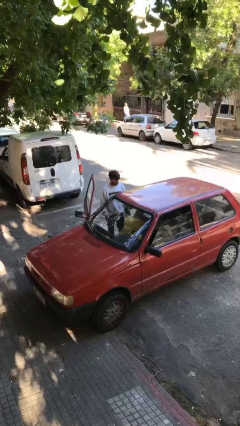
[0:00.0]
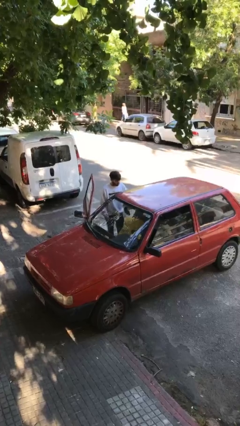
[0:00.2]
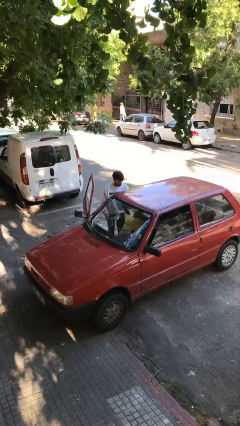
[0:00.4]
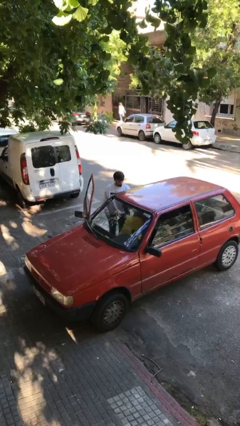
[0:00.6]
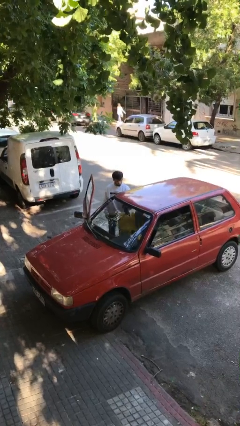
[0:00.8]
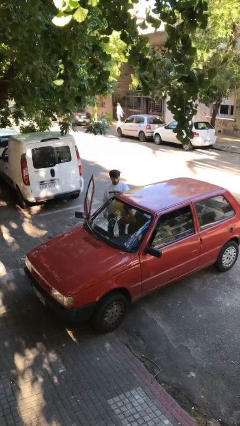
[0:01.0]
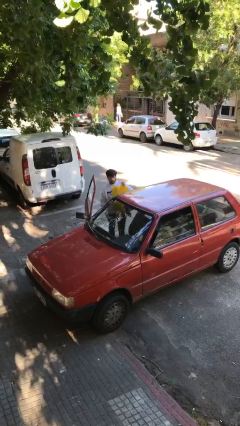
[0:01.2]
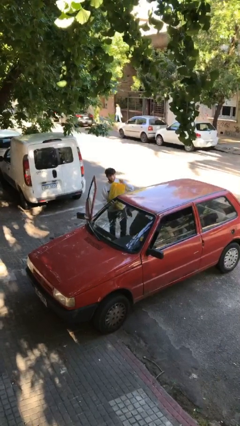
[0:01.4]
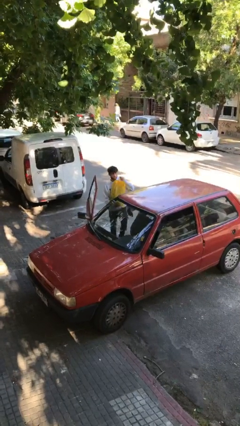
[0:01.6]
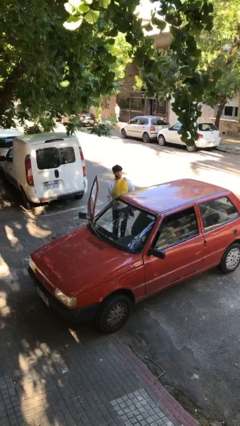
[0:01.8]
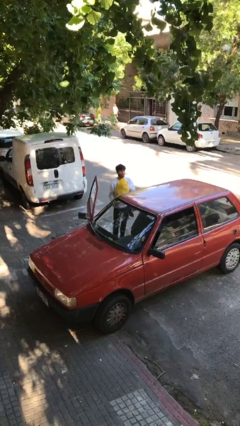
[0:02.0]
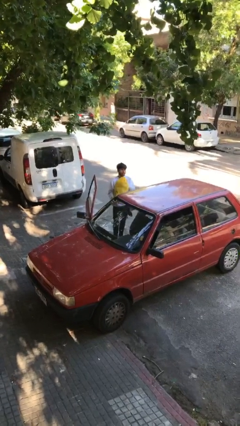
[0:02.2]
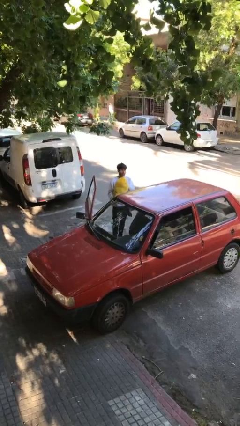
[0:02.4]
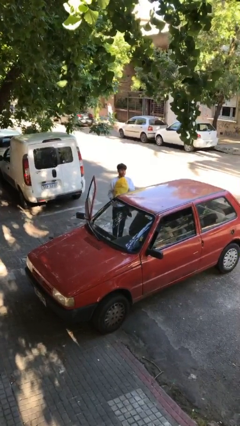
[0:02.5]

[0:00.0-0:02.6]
person unloads car

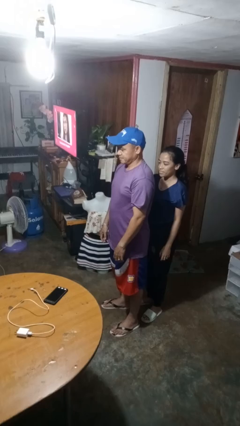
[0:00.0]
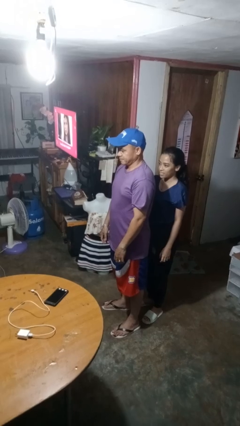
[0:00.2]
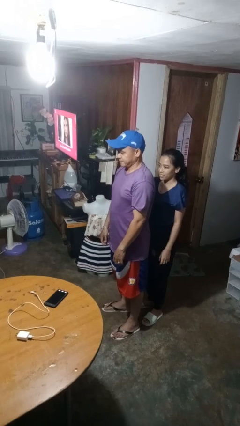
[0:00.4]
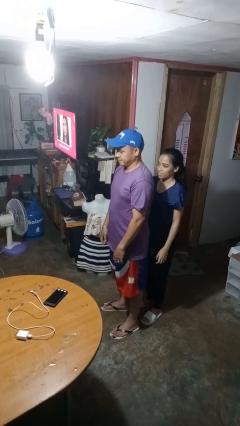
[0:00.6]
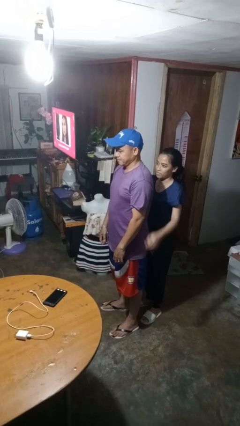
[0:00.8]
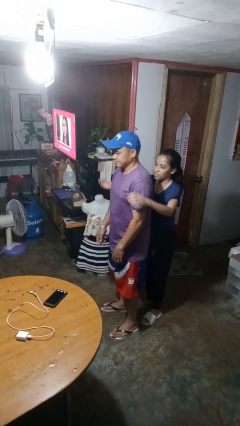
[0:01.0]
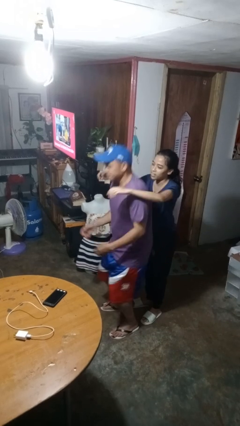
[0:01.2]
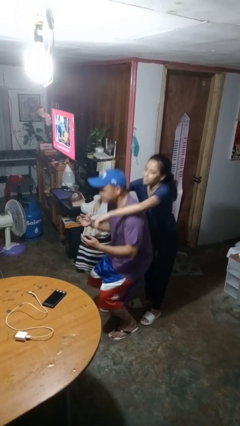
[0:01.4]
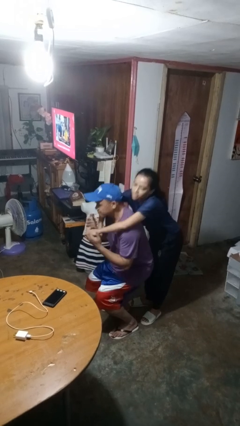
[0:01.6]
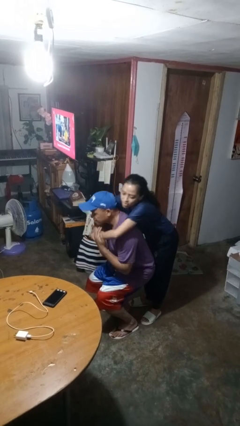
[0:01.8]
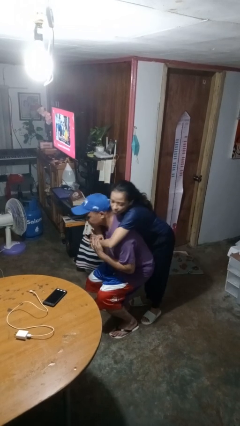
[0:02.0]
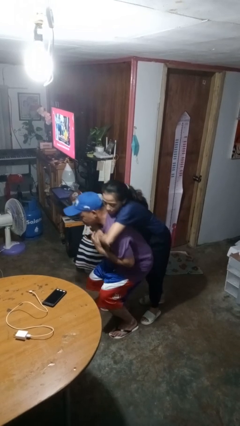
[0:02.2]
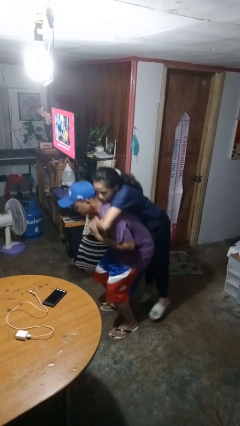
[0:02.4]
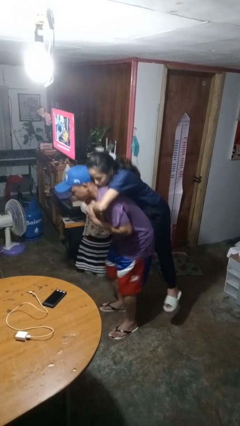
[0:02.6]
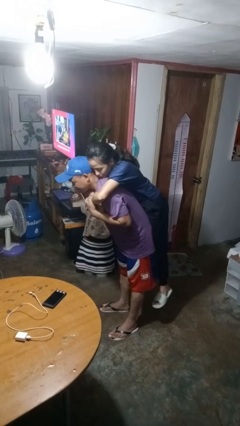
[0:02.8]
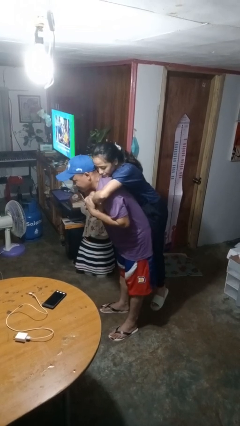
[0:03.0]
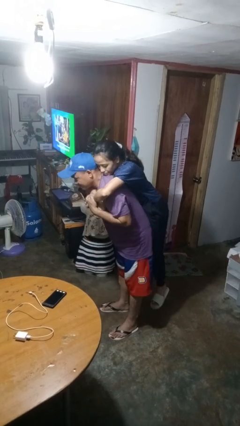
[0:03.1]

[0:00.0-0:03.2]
person picks up person

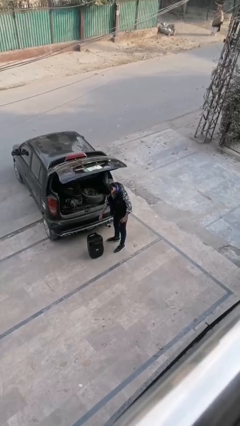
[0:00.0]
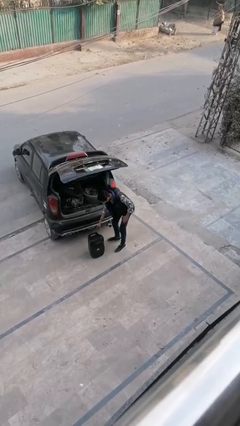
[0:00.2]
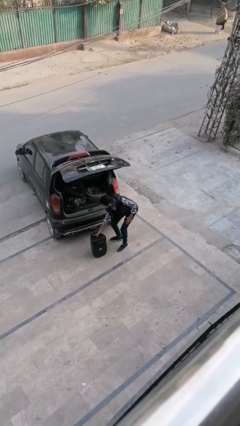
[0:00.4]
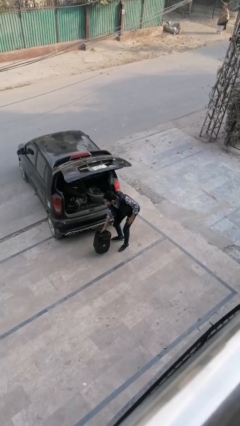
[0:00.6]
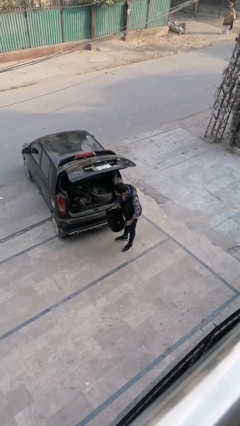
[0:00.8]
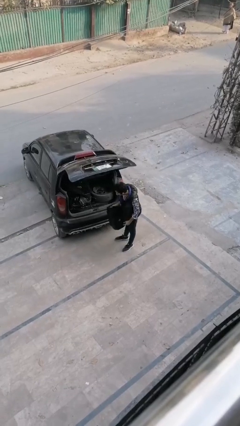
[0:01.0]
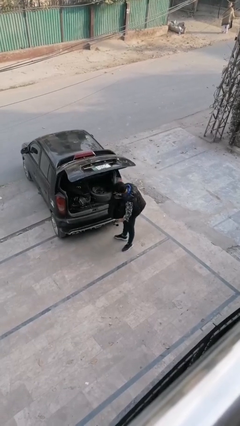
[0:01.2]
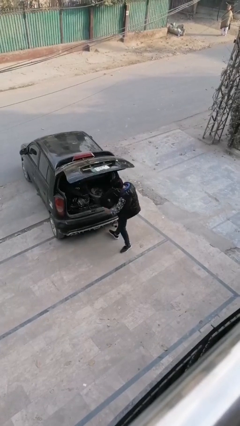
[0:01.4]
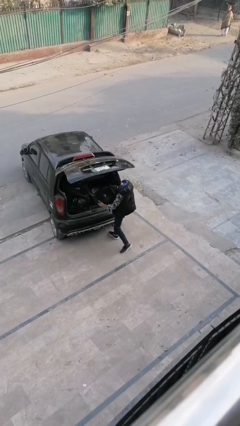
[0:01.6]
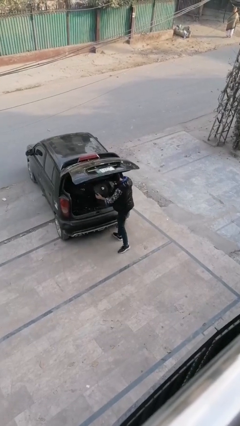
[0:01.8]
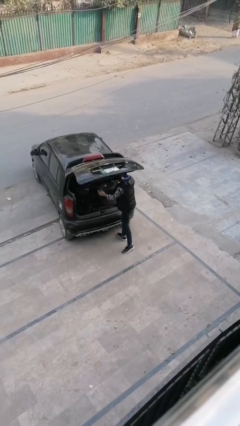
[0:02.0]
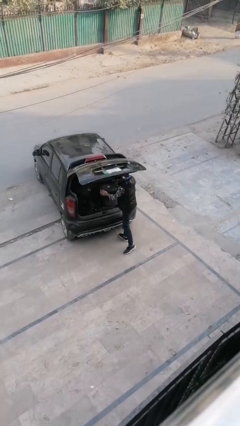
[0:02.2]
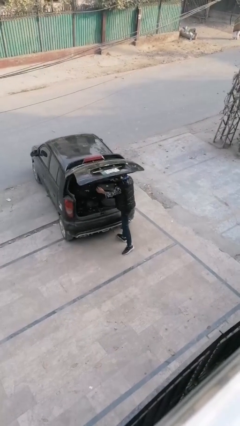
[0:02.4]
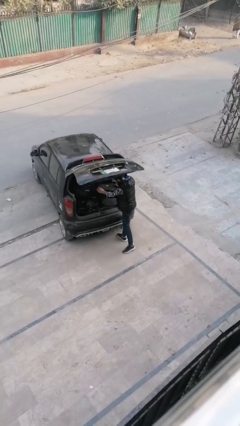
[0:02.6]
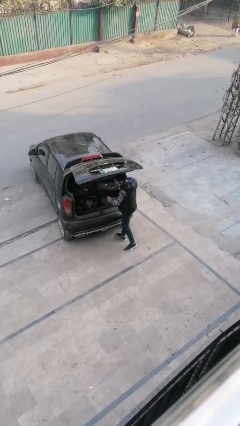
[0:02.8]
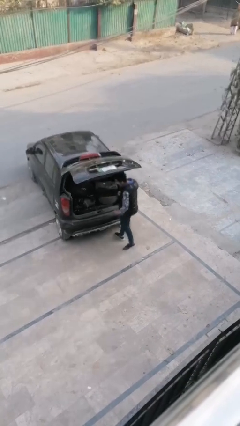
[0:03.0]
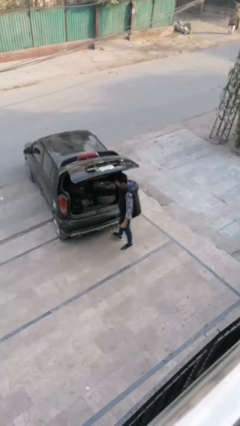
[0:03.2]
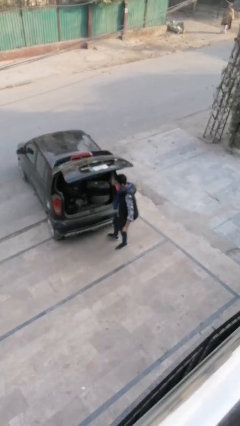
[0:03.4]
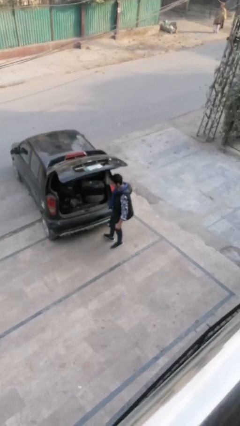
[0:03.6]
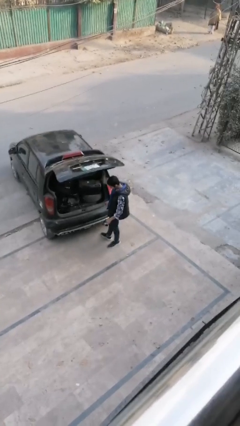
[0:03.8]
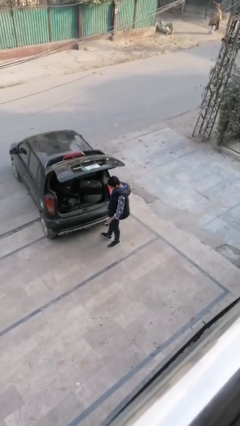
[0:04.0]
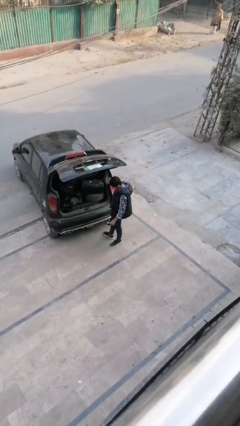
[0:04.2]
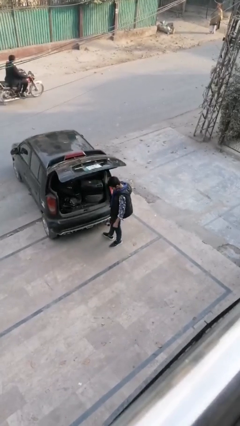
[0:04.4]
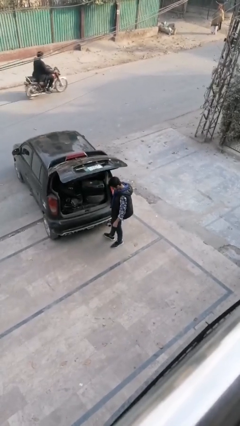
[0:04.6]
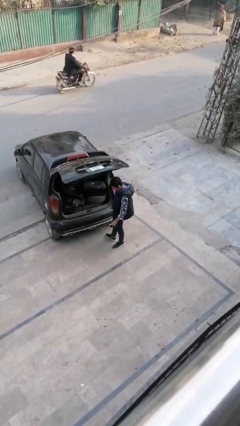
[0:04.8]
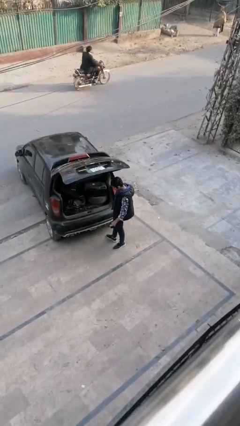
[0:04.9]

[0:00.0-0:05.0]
person loads car

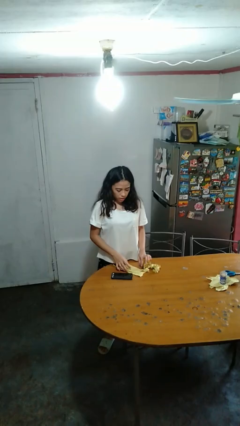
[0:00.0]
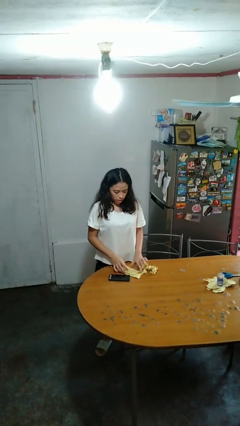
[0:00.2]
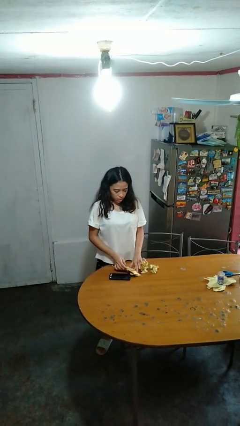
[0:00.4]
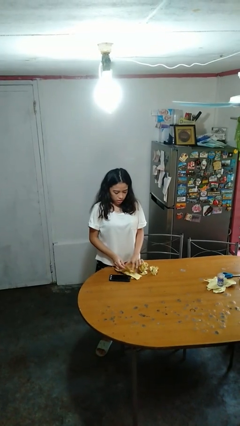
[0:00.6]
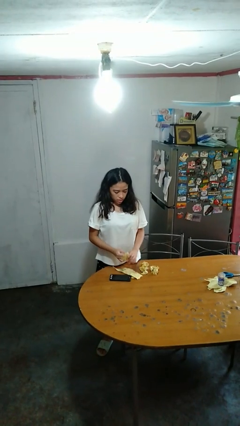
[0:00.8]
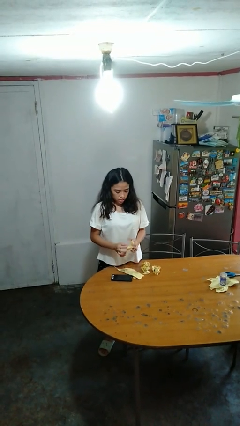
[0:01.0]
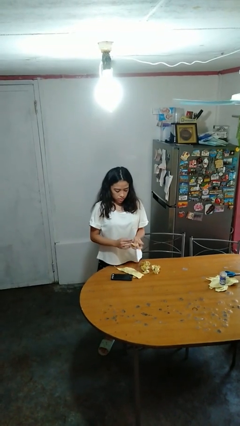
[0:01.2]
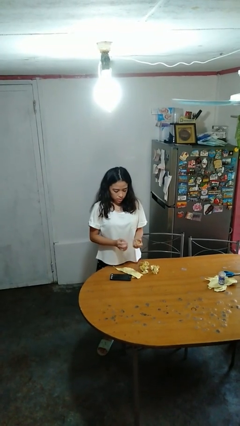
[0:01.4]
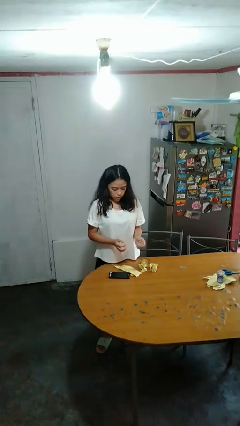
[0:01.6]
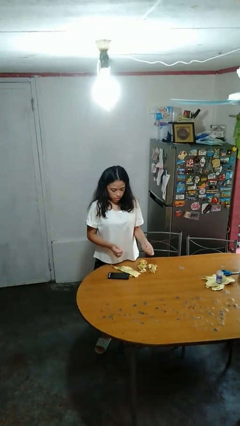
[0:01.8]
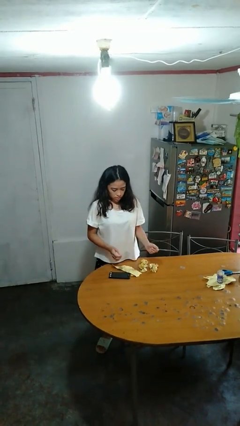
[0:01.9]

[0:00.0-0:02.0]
person crumples paper

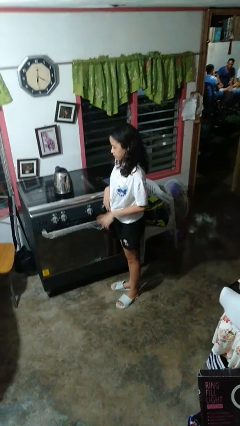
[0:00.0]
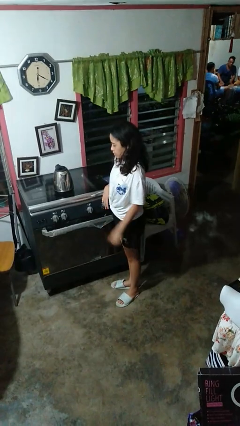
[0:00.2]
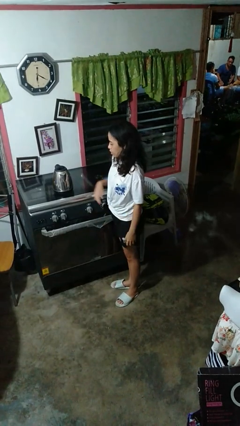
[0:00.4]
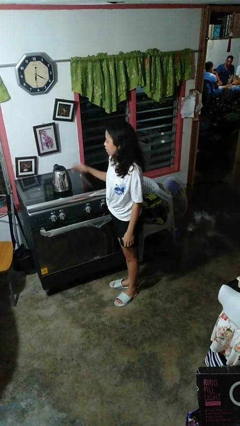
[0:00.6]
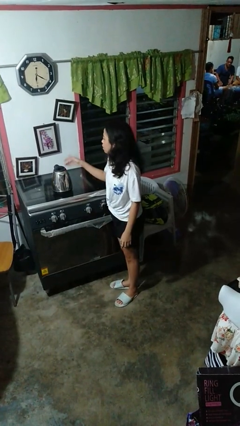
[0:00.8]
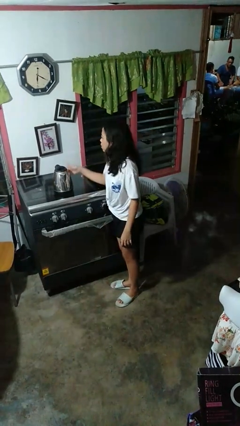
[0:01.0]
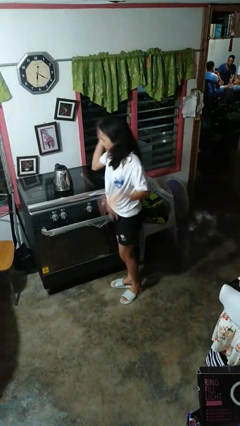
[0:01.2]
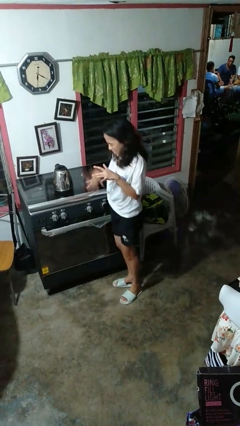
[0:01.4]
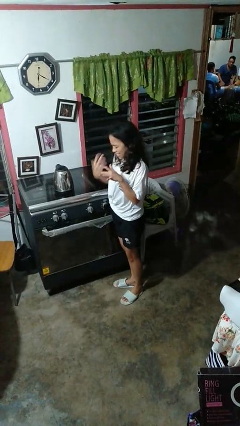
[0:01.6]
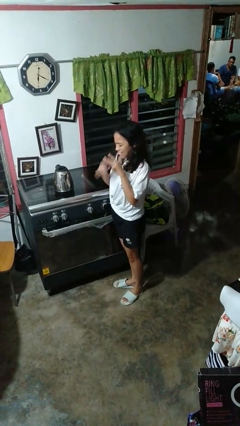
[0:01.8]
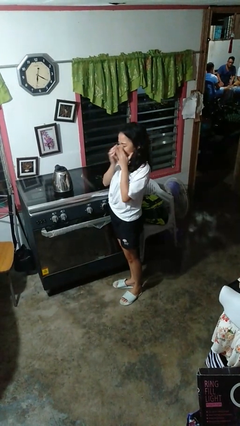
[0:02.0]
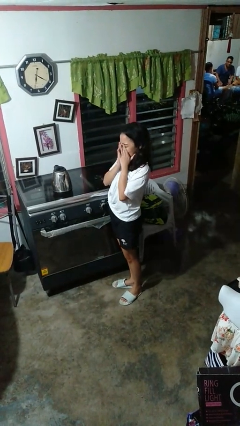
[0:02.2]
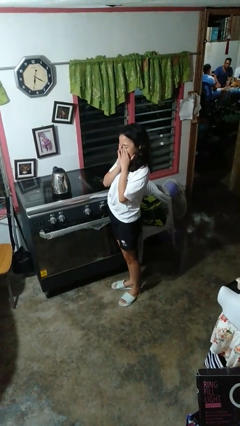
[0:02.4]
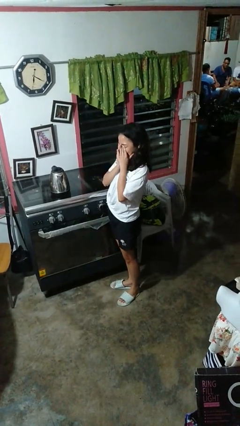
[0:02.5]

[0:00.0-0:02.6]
person burns hand

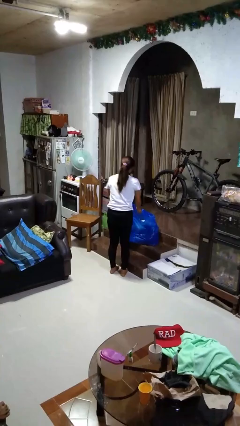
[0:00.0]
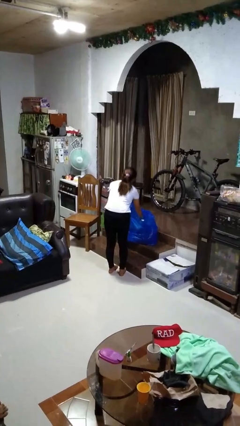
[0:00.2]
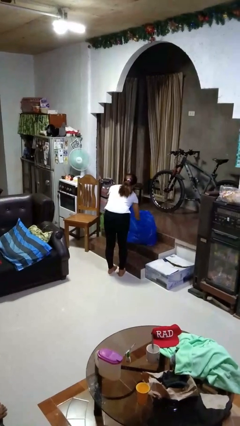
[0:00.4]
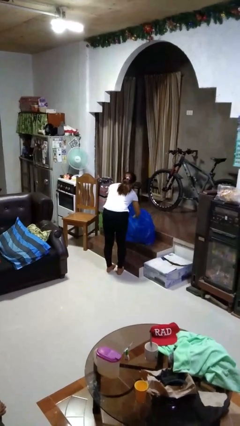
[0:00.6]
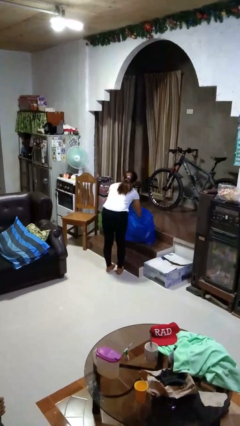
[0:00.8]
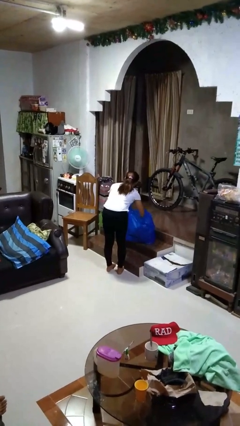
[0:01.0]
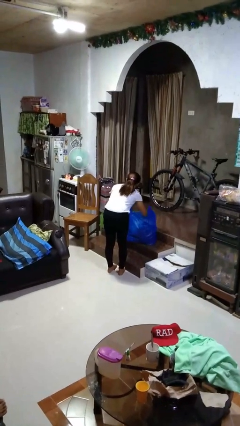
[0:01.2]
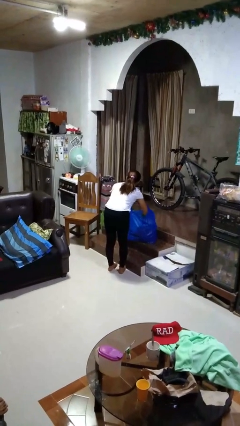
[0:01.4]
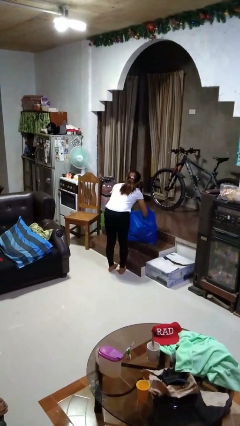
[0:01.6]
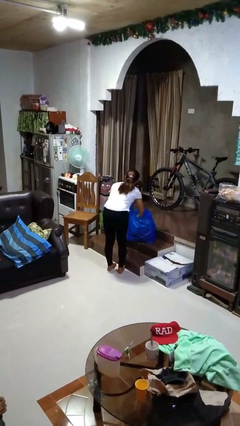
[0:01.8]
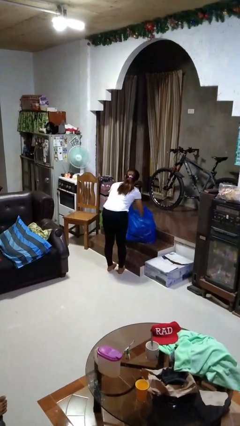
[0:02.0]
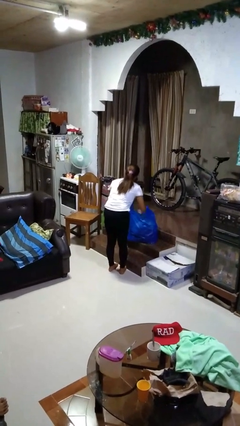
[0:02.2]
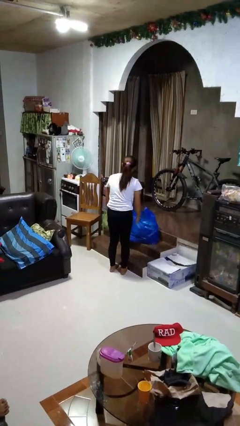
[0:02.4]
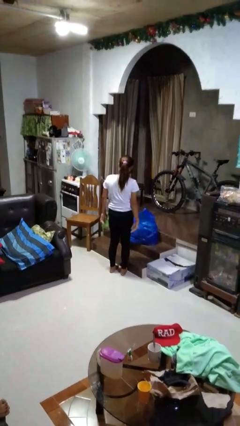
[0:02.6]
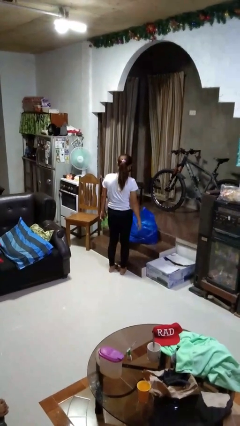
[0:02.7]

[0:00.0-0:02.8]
person searches in bag
